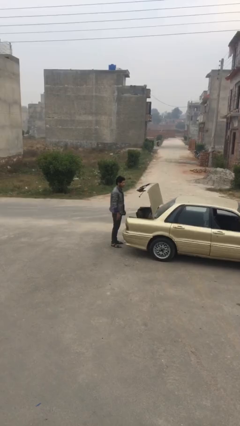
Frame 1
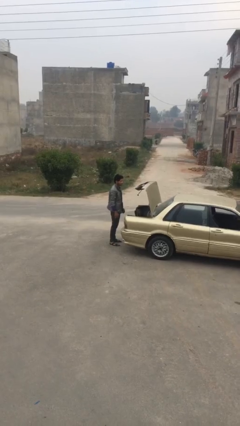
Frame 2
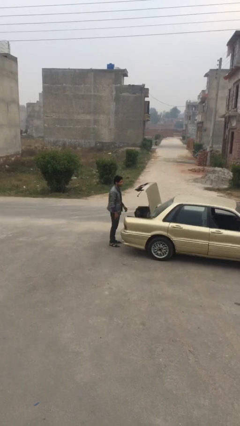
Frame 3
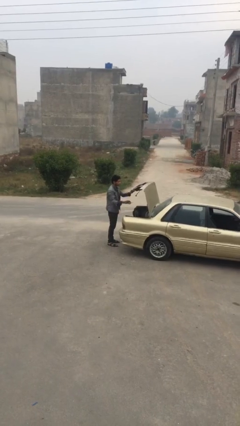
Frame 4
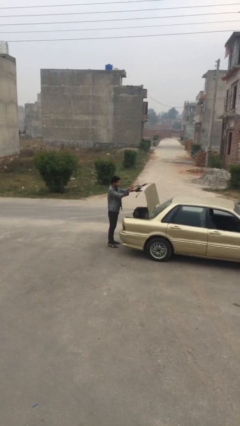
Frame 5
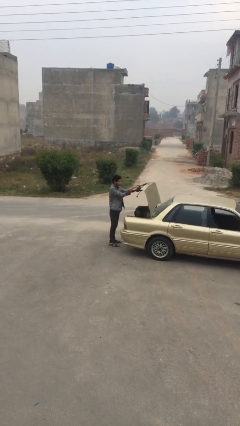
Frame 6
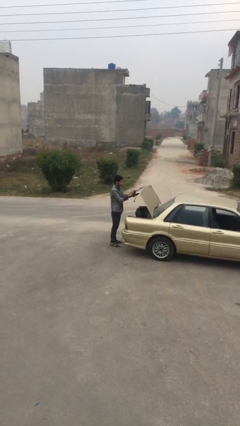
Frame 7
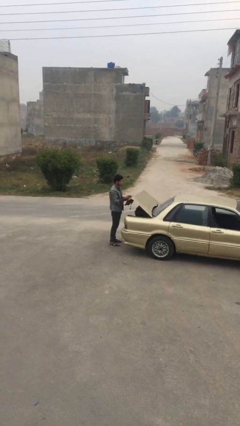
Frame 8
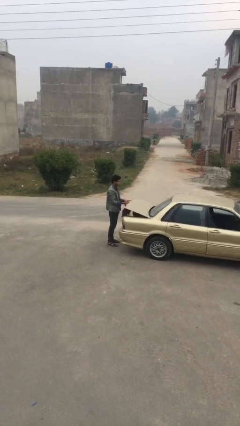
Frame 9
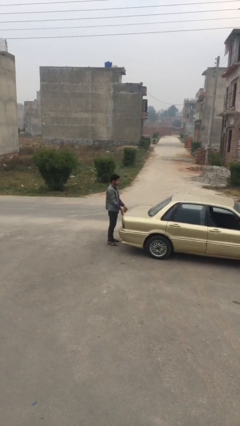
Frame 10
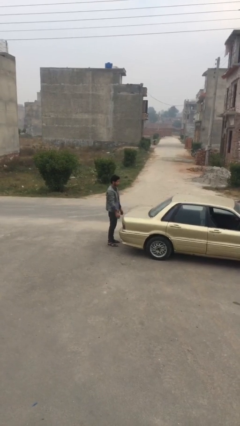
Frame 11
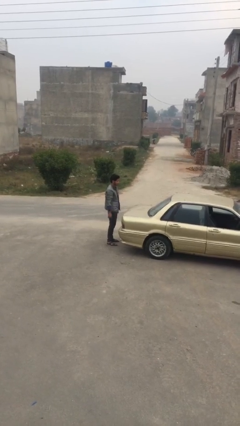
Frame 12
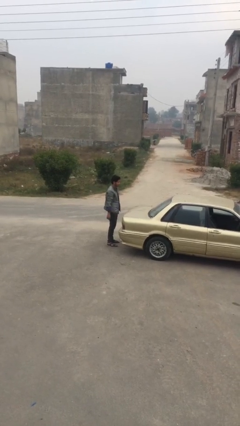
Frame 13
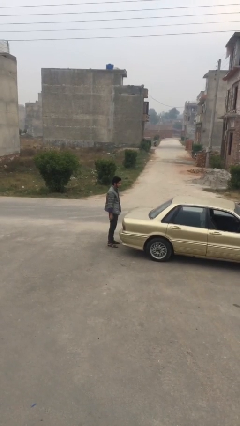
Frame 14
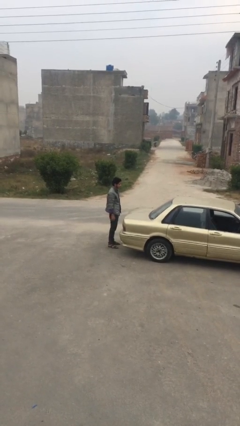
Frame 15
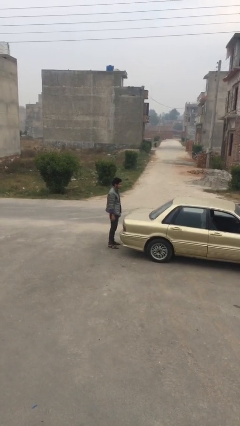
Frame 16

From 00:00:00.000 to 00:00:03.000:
person closes car trunk

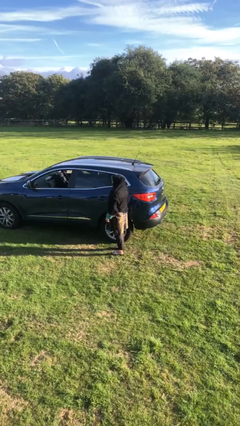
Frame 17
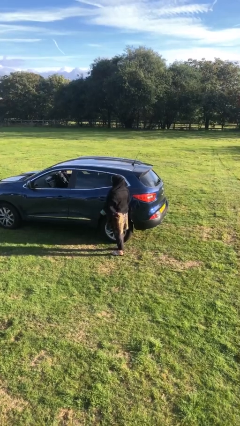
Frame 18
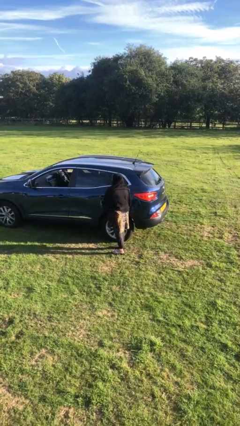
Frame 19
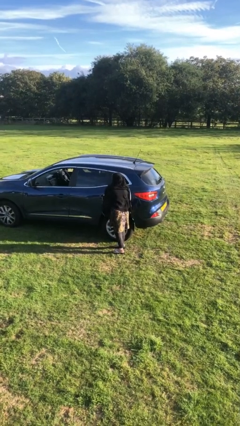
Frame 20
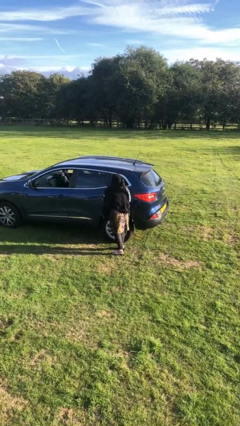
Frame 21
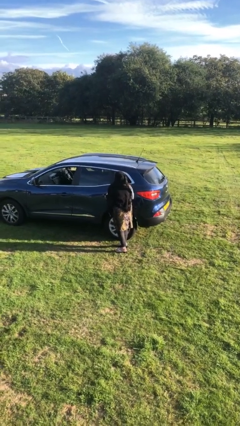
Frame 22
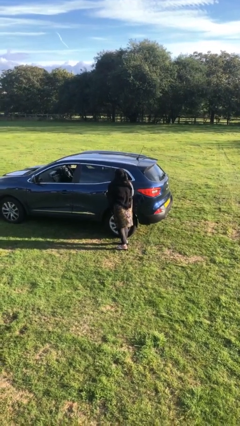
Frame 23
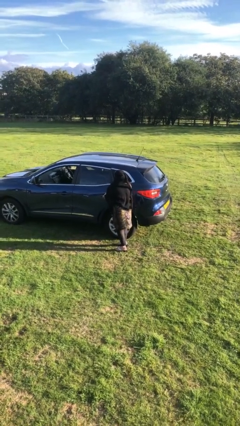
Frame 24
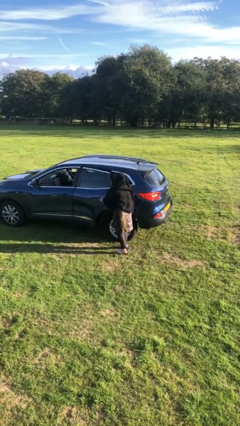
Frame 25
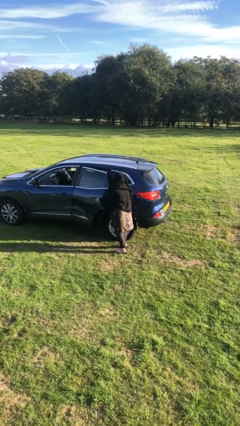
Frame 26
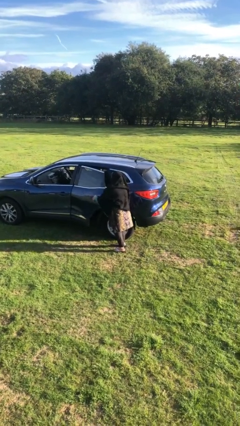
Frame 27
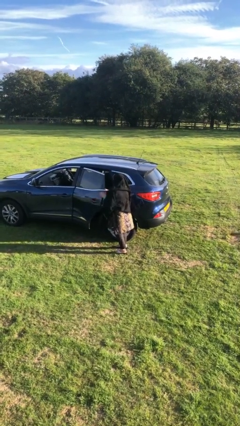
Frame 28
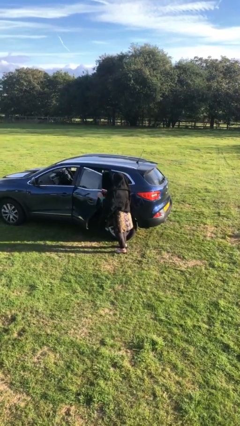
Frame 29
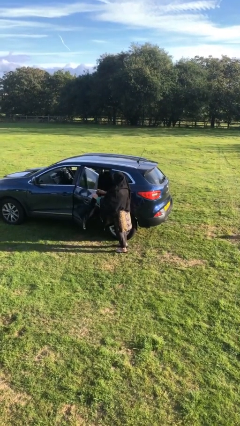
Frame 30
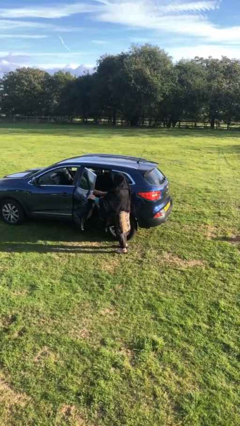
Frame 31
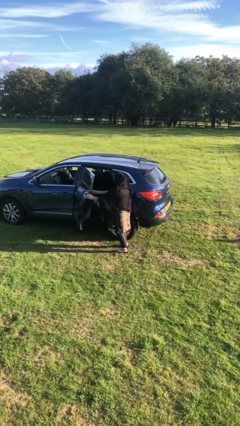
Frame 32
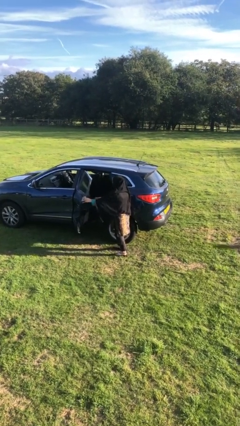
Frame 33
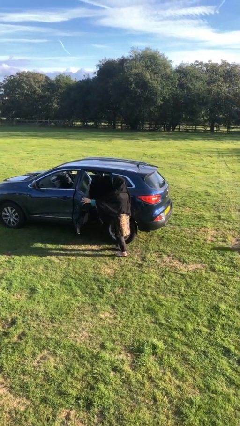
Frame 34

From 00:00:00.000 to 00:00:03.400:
person opens car door

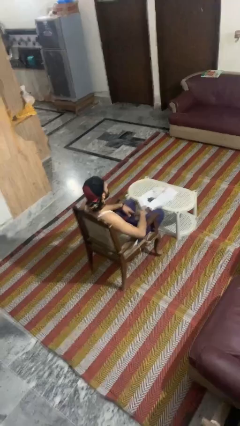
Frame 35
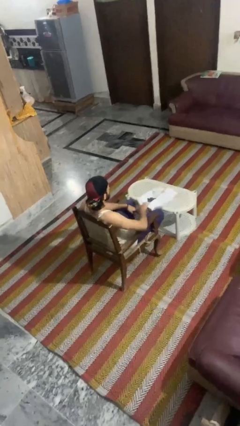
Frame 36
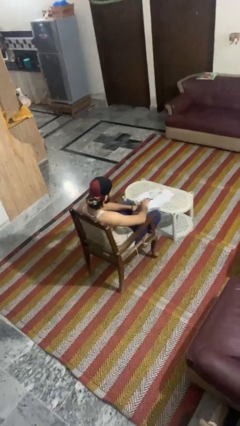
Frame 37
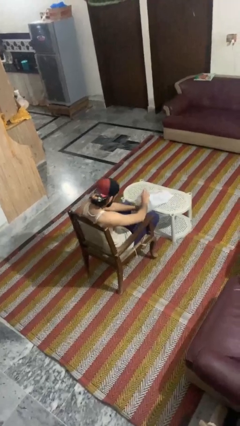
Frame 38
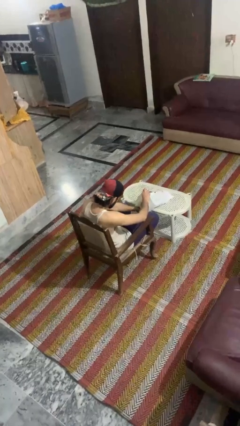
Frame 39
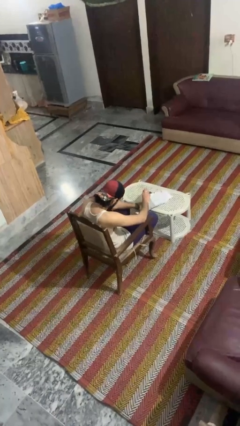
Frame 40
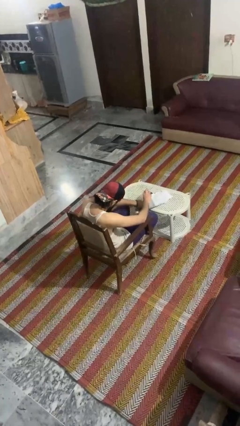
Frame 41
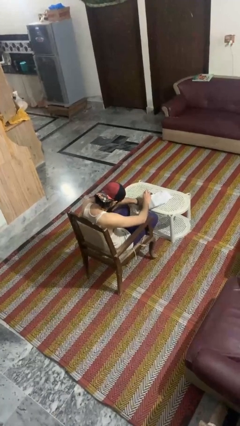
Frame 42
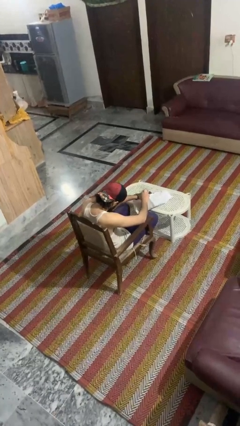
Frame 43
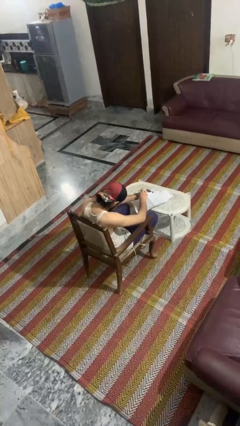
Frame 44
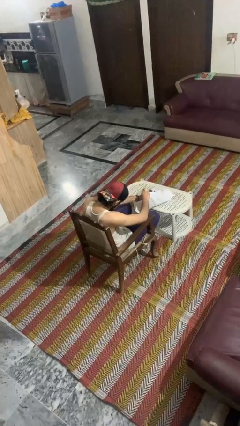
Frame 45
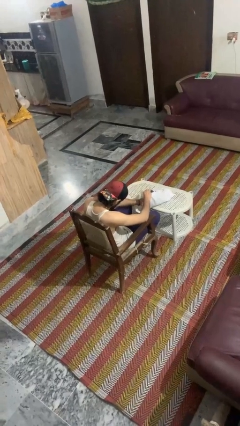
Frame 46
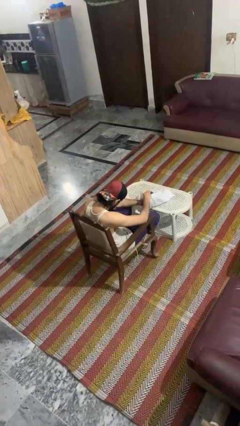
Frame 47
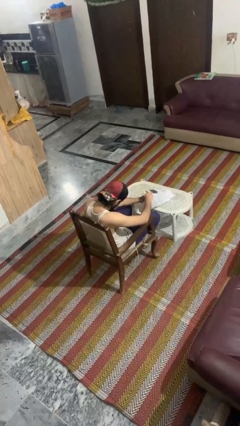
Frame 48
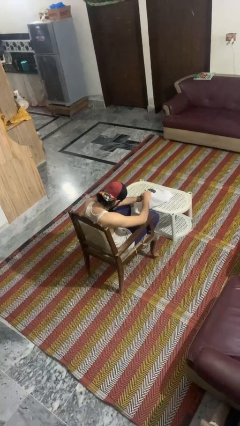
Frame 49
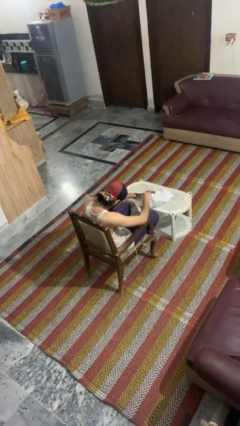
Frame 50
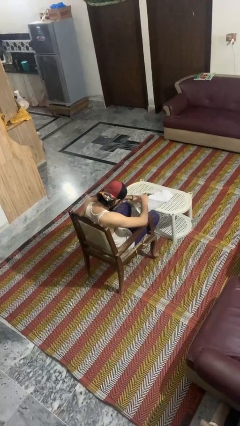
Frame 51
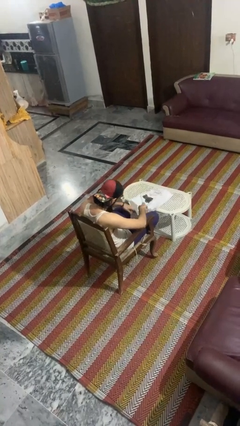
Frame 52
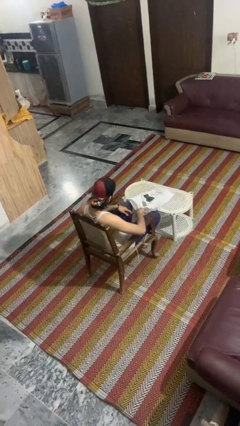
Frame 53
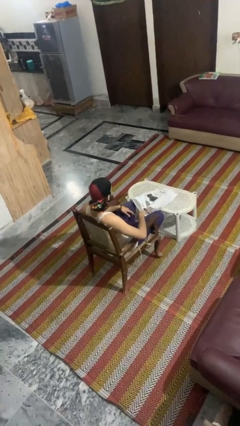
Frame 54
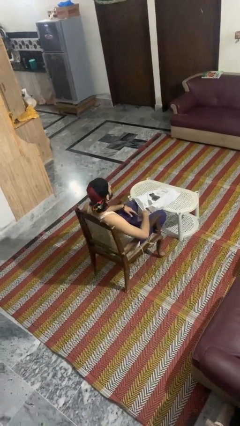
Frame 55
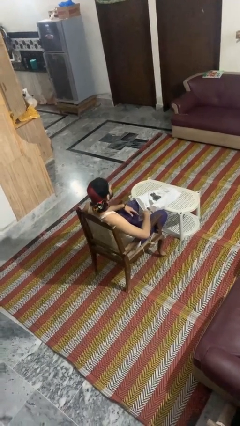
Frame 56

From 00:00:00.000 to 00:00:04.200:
person searches in bag

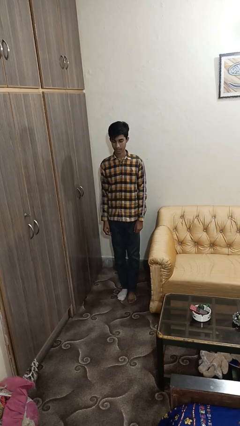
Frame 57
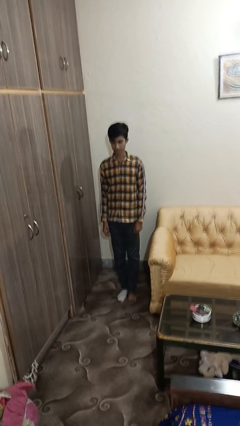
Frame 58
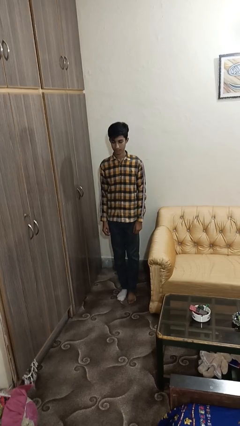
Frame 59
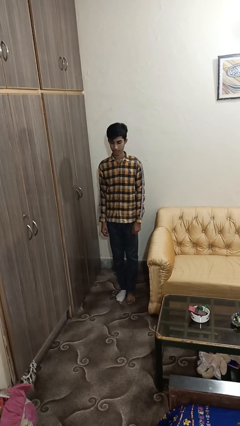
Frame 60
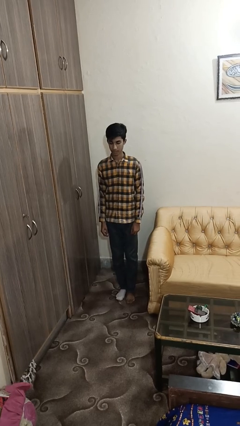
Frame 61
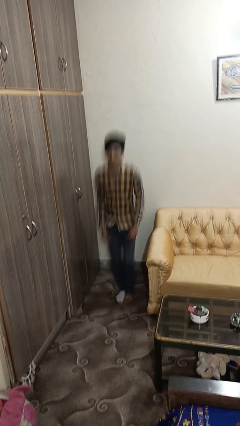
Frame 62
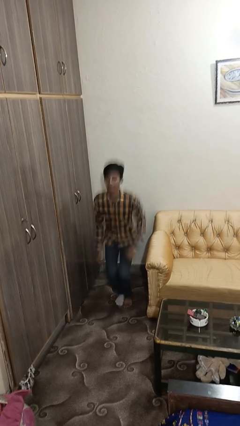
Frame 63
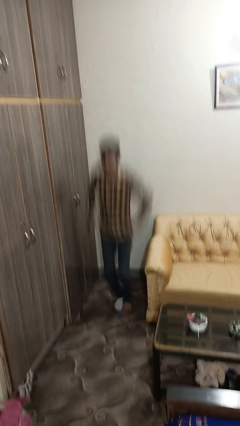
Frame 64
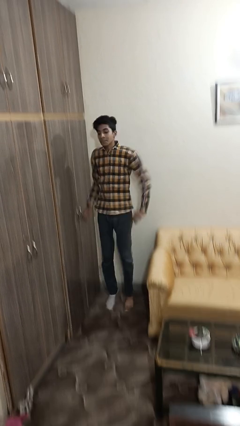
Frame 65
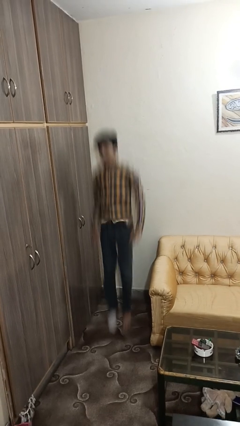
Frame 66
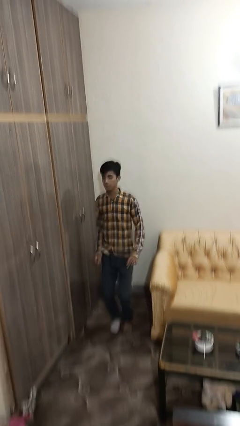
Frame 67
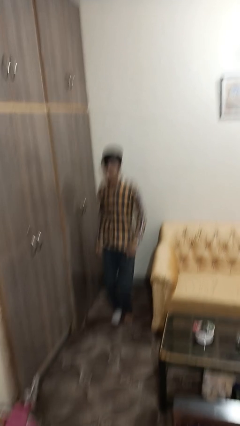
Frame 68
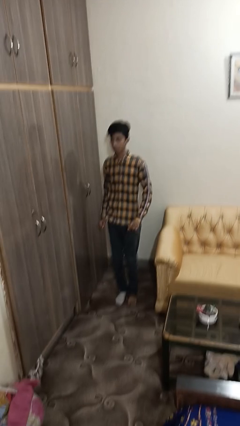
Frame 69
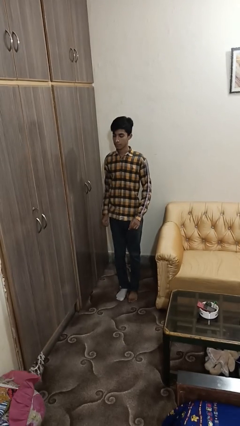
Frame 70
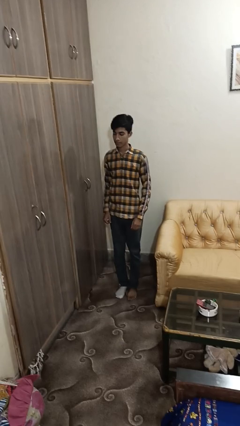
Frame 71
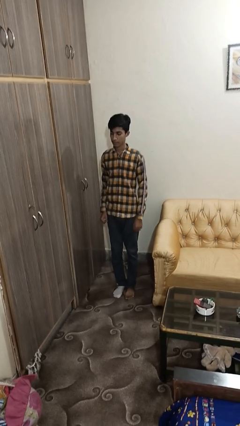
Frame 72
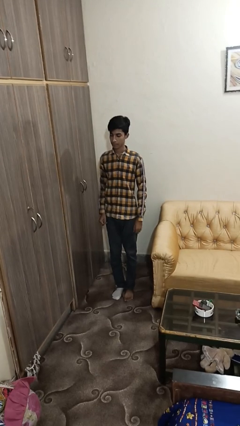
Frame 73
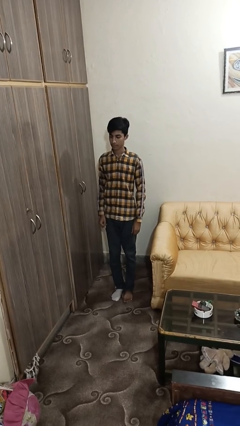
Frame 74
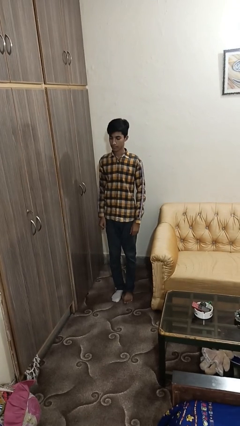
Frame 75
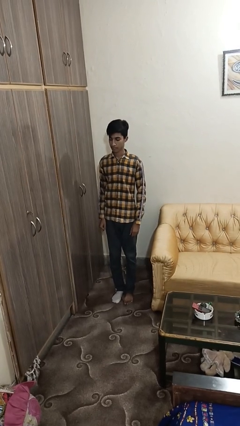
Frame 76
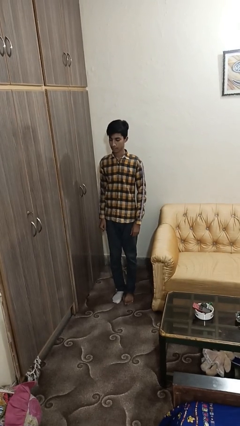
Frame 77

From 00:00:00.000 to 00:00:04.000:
person jumps

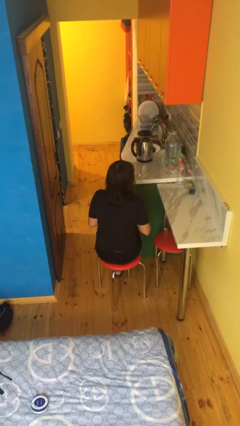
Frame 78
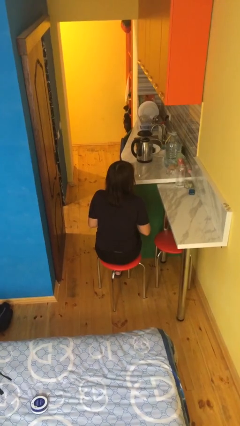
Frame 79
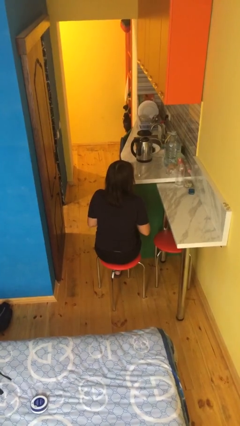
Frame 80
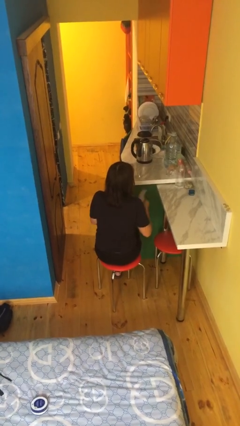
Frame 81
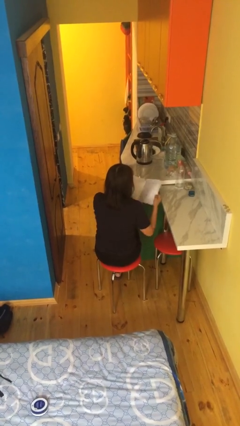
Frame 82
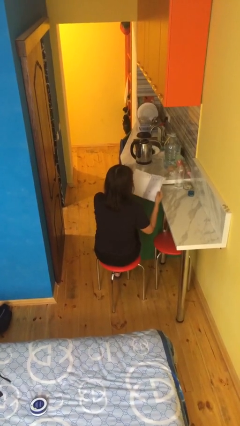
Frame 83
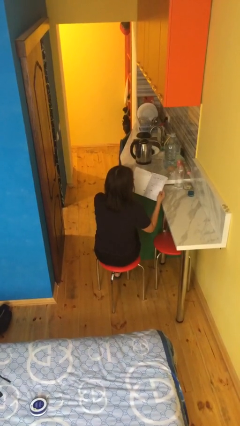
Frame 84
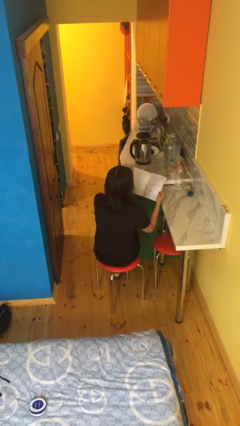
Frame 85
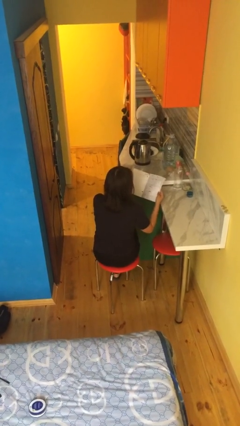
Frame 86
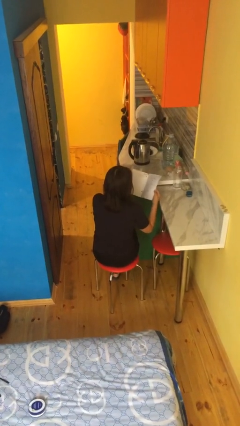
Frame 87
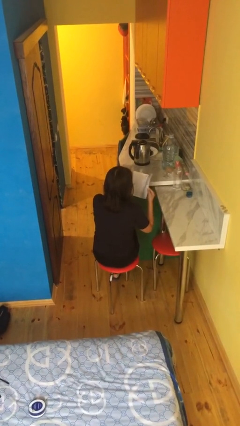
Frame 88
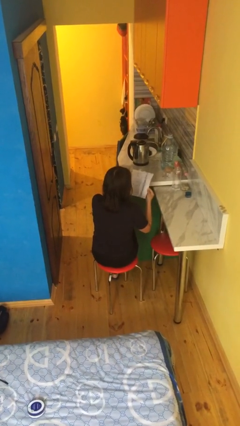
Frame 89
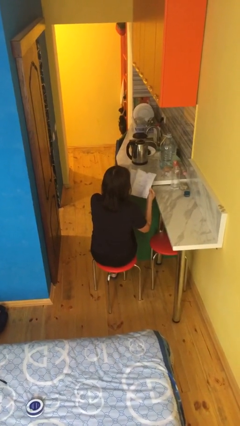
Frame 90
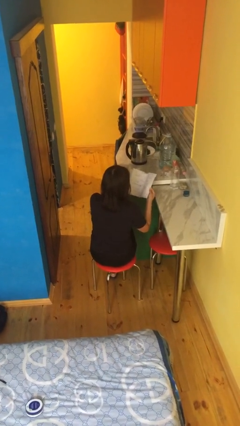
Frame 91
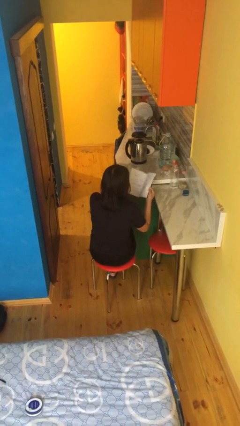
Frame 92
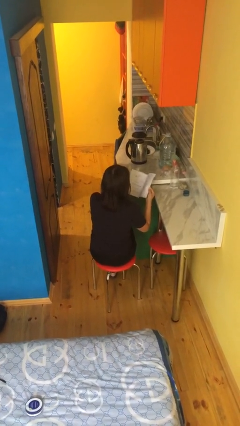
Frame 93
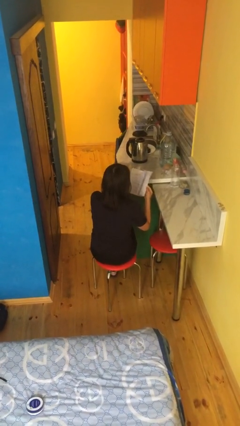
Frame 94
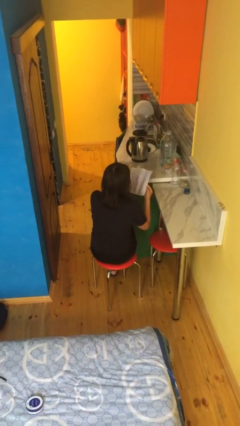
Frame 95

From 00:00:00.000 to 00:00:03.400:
person reads book
